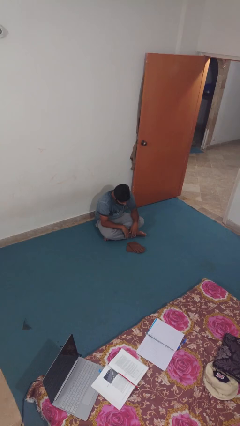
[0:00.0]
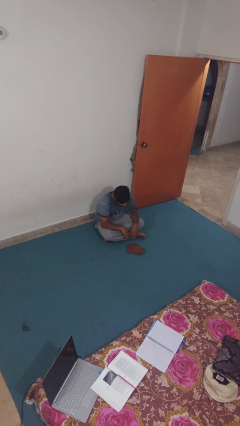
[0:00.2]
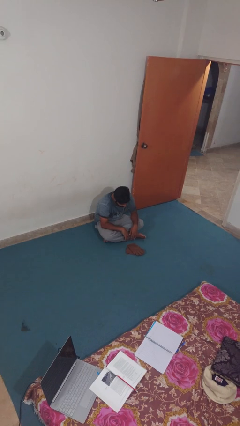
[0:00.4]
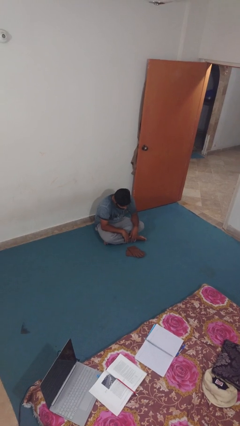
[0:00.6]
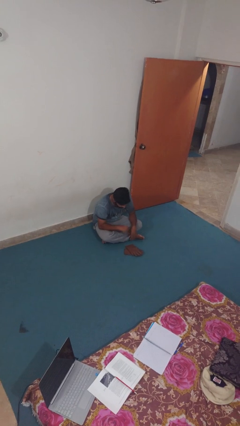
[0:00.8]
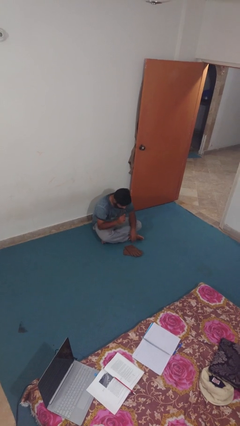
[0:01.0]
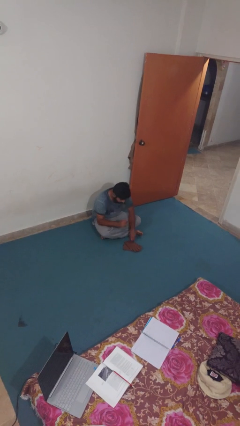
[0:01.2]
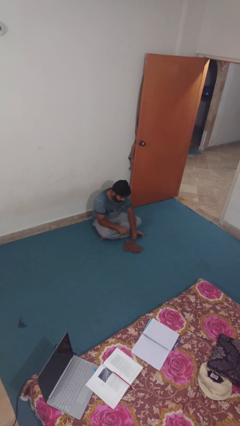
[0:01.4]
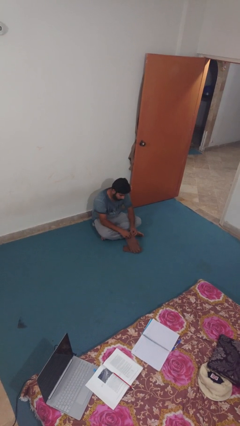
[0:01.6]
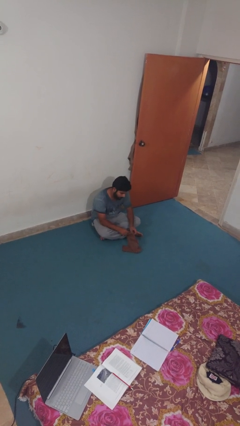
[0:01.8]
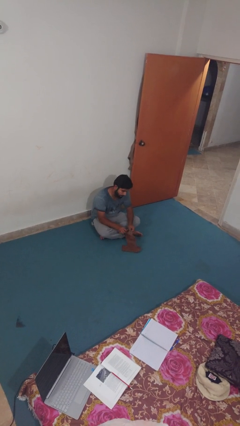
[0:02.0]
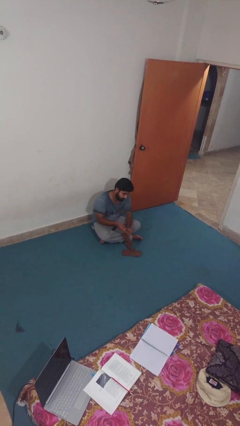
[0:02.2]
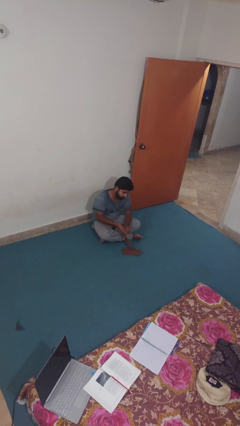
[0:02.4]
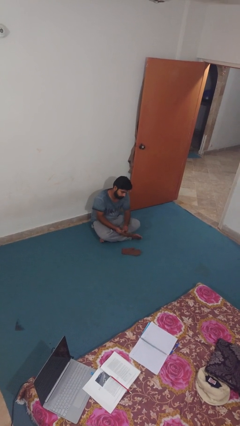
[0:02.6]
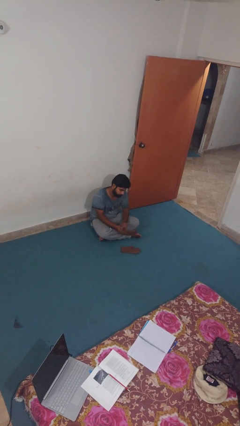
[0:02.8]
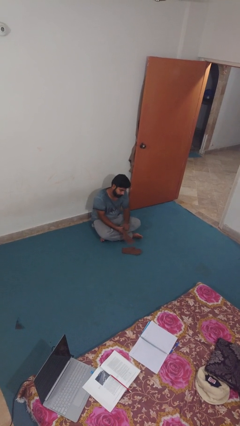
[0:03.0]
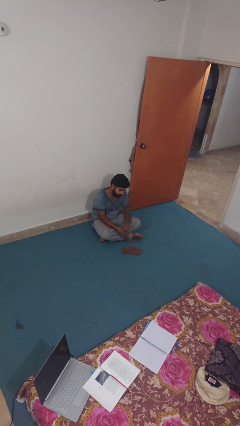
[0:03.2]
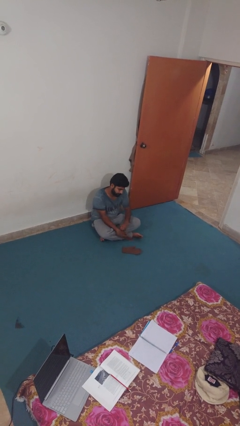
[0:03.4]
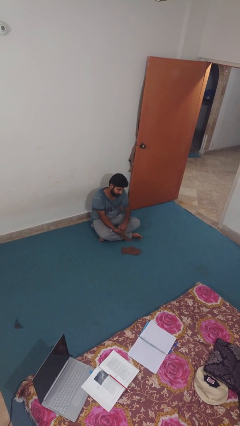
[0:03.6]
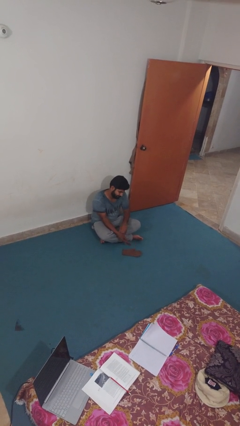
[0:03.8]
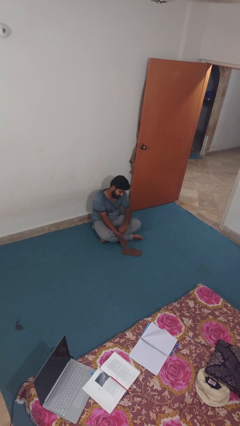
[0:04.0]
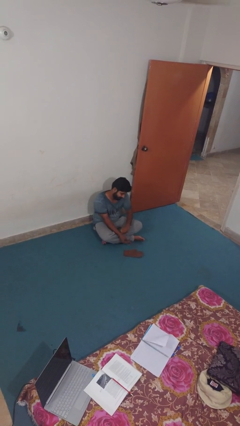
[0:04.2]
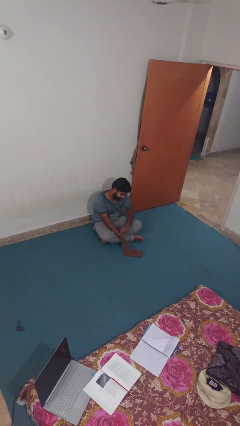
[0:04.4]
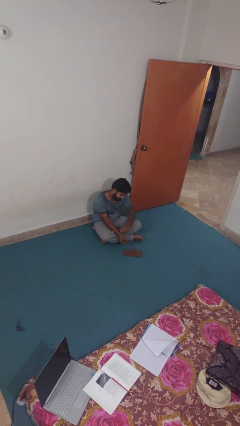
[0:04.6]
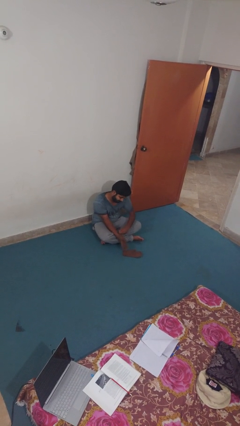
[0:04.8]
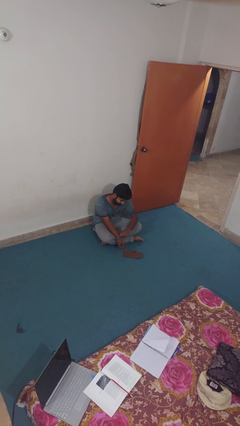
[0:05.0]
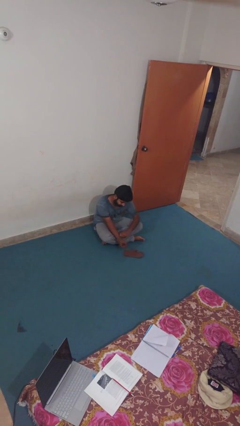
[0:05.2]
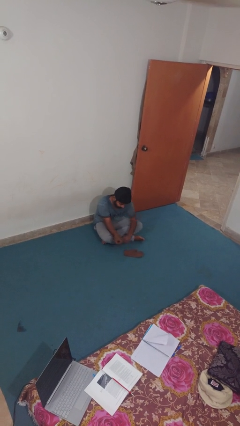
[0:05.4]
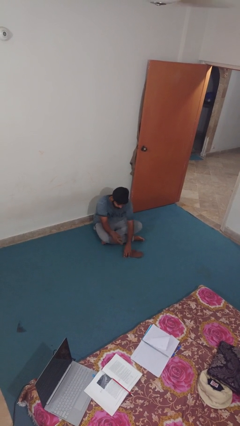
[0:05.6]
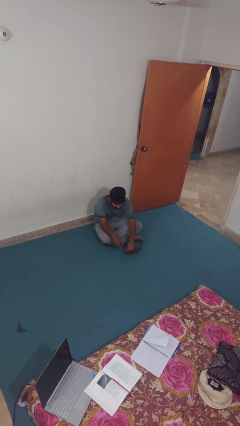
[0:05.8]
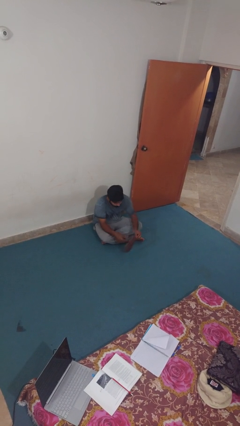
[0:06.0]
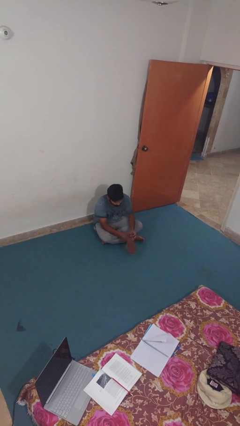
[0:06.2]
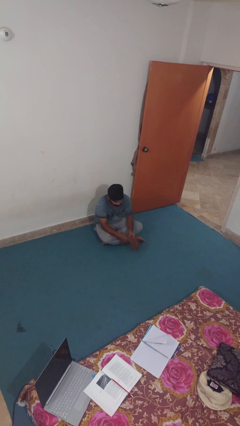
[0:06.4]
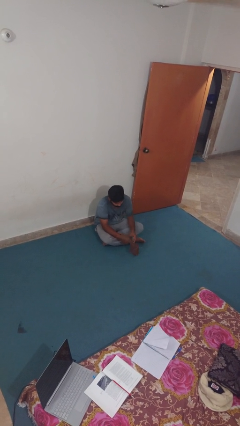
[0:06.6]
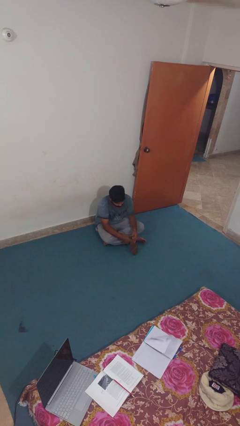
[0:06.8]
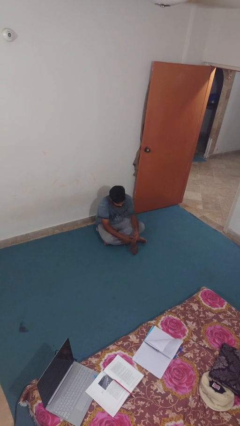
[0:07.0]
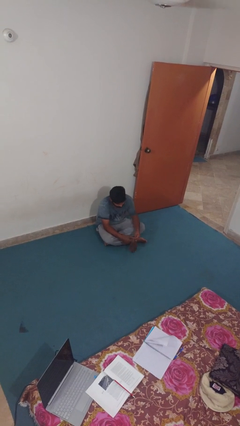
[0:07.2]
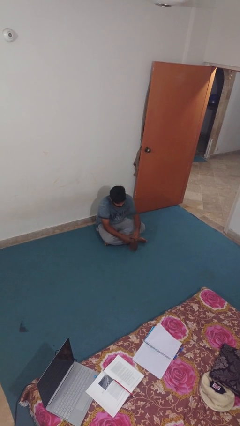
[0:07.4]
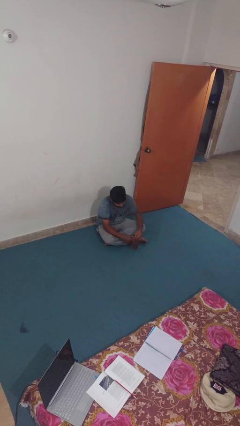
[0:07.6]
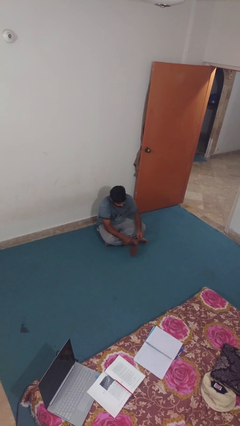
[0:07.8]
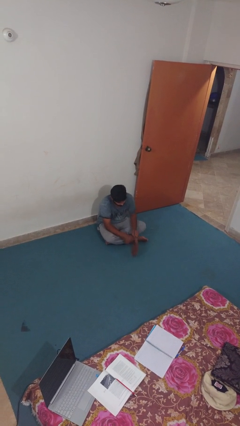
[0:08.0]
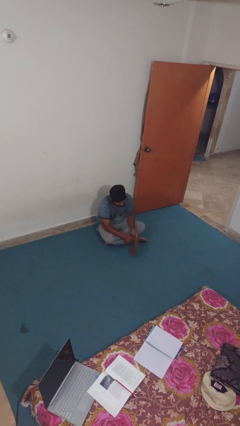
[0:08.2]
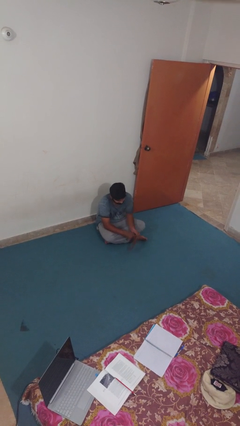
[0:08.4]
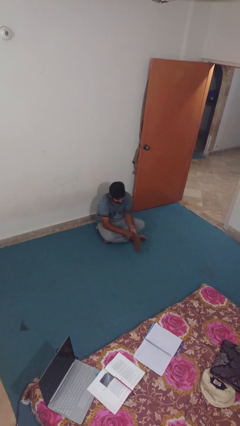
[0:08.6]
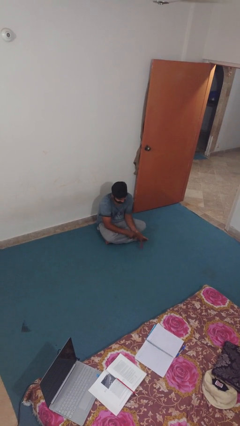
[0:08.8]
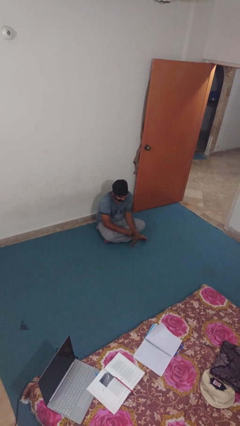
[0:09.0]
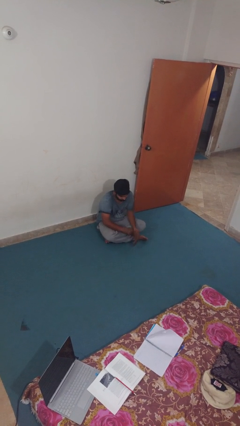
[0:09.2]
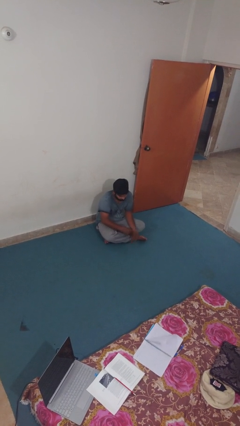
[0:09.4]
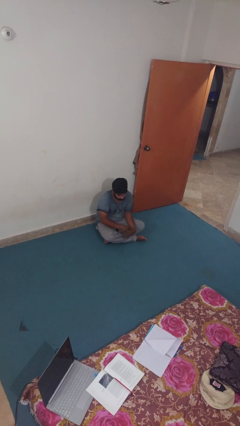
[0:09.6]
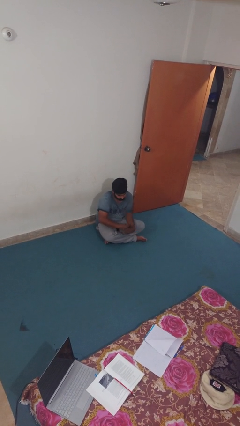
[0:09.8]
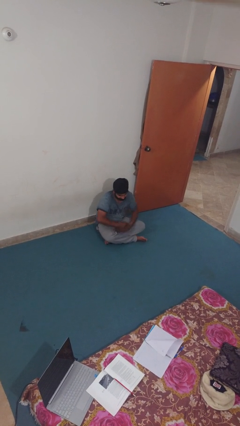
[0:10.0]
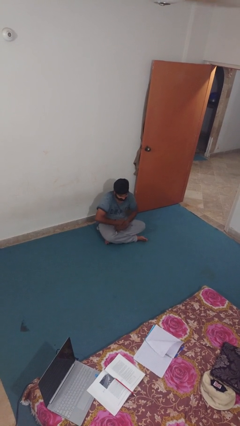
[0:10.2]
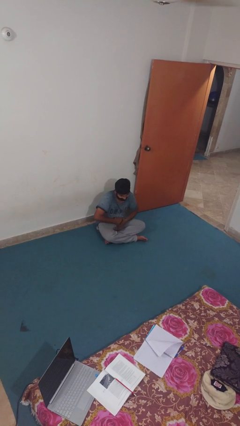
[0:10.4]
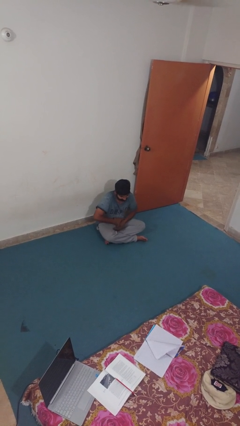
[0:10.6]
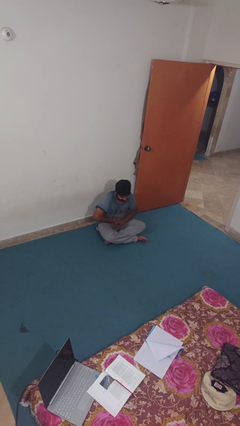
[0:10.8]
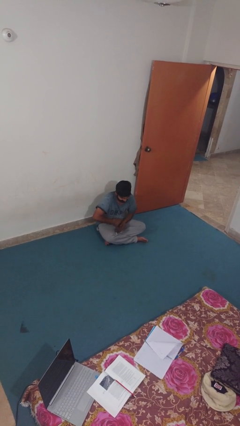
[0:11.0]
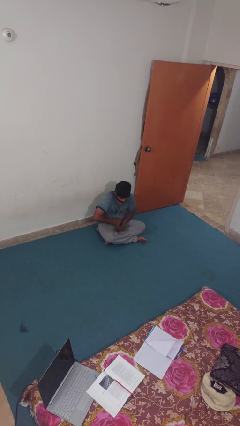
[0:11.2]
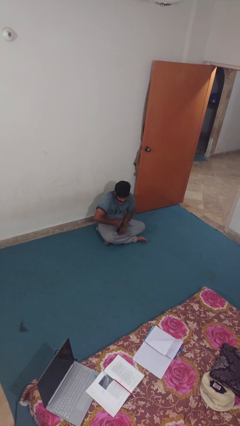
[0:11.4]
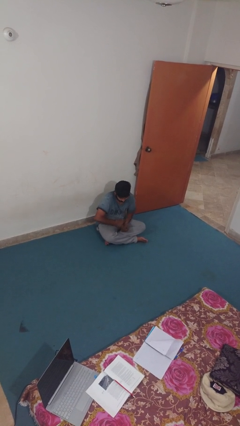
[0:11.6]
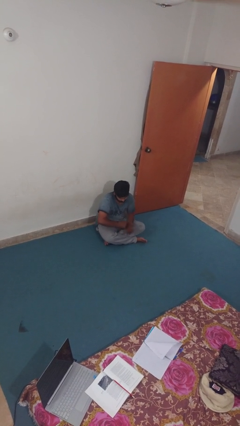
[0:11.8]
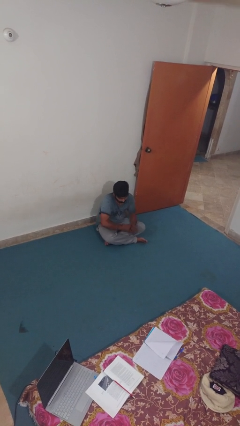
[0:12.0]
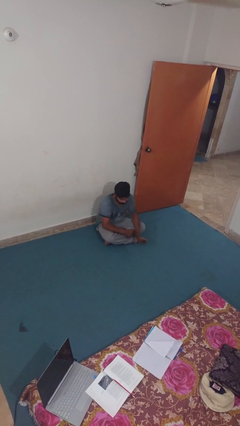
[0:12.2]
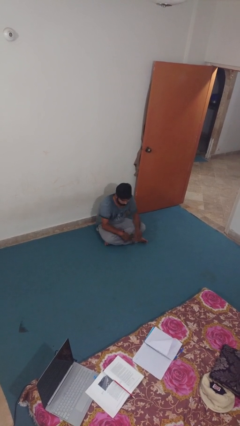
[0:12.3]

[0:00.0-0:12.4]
person puts on gloves

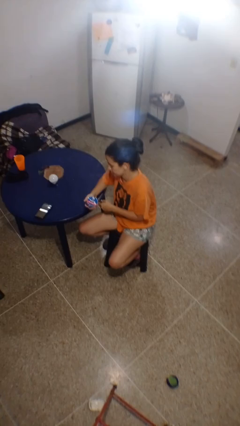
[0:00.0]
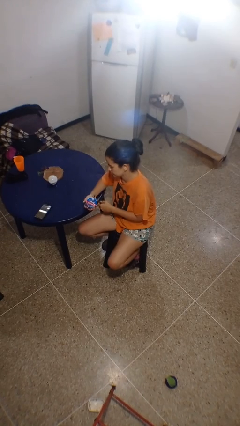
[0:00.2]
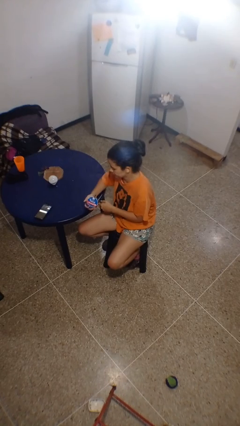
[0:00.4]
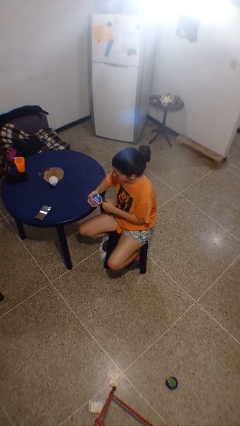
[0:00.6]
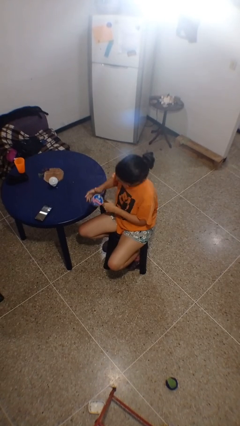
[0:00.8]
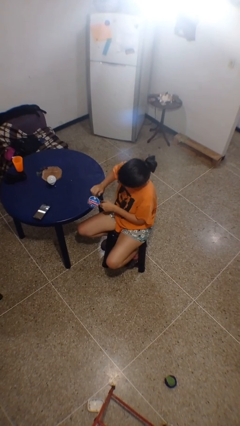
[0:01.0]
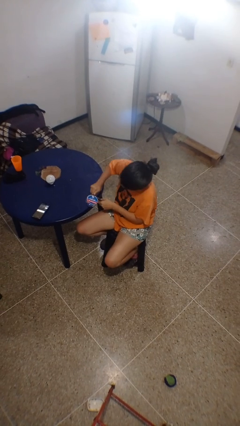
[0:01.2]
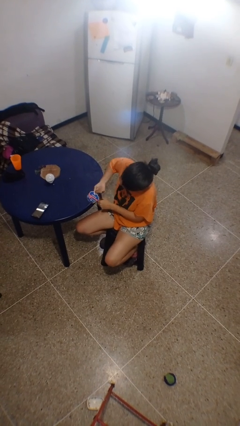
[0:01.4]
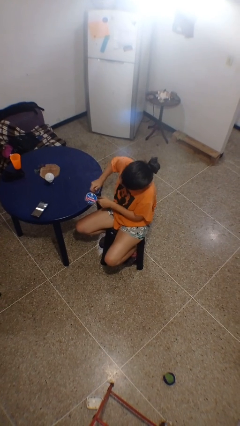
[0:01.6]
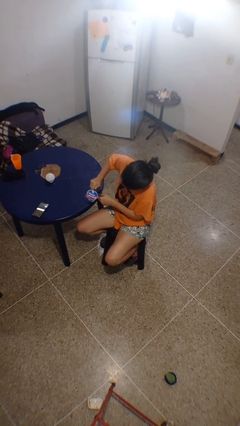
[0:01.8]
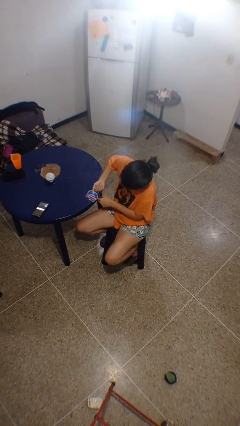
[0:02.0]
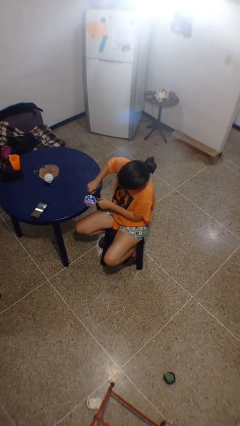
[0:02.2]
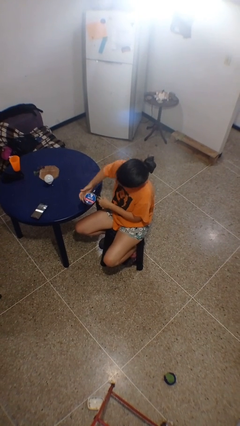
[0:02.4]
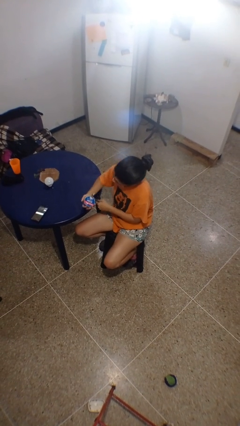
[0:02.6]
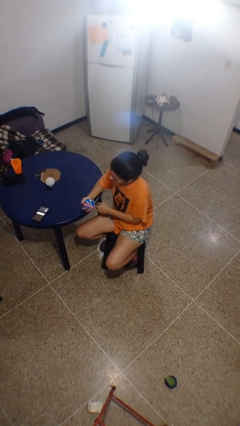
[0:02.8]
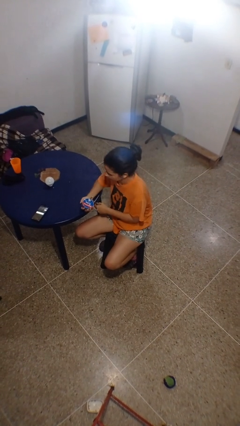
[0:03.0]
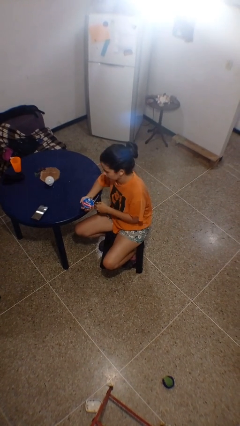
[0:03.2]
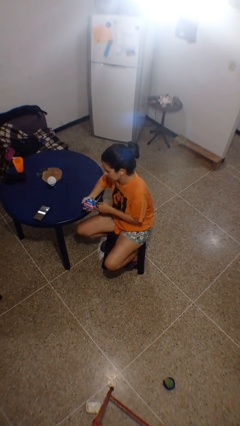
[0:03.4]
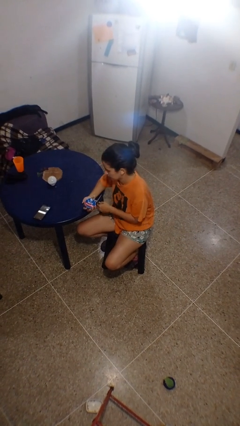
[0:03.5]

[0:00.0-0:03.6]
person opens can with can opener

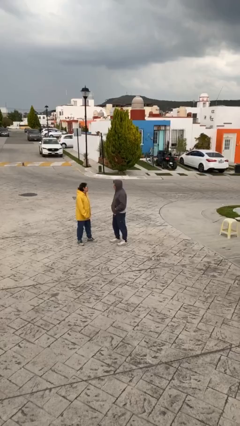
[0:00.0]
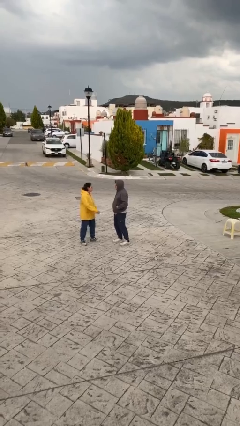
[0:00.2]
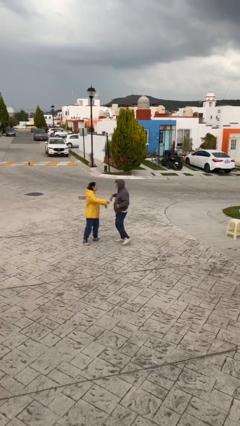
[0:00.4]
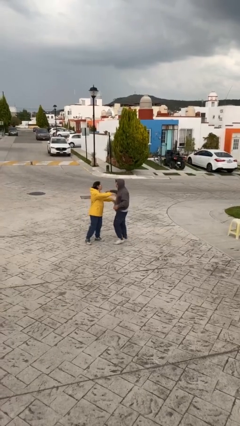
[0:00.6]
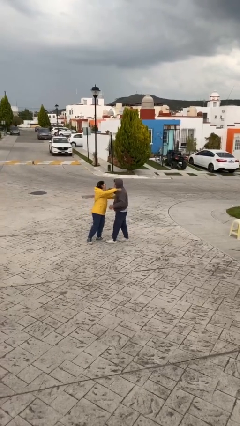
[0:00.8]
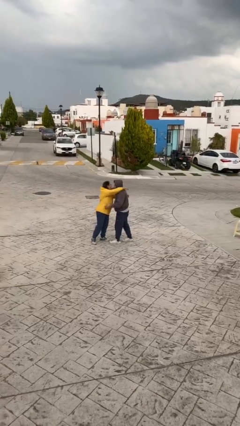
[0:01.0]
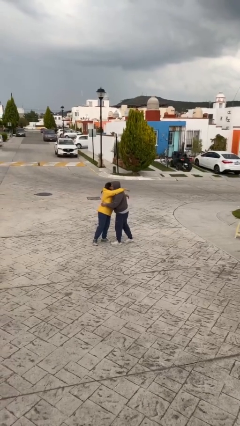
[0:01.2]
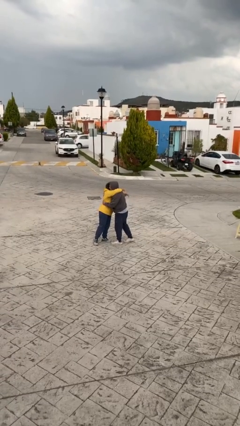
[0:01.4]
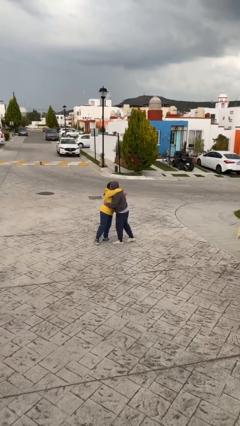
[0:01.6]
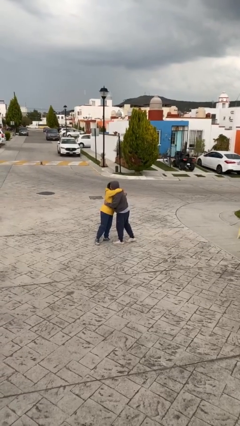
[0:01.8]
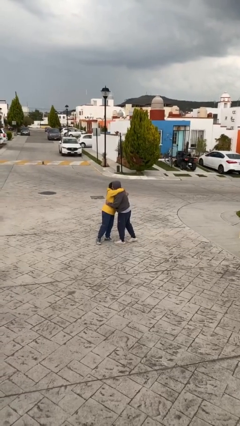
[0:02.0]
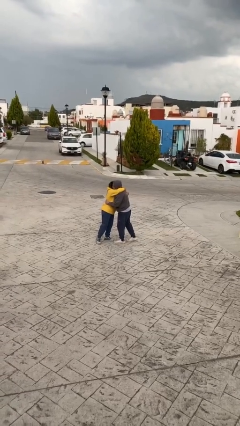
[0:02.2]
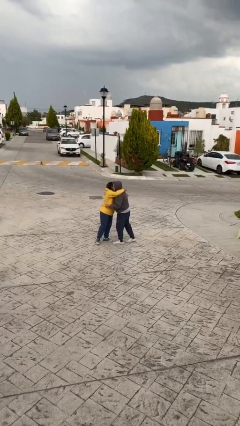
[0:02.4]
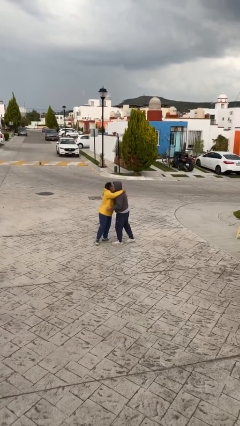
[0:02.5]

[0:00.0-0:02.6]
person embraces person
